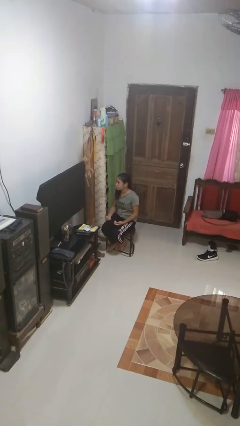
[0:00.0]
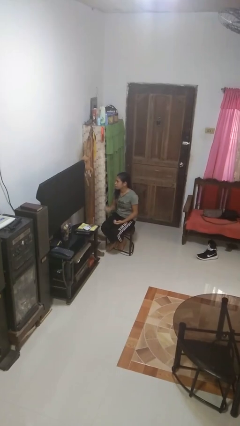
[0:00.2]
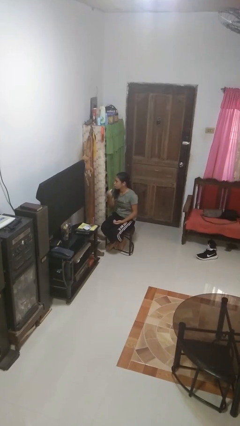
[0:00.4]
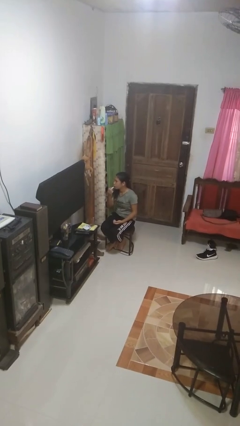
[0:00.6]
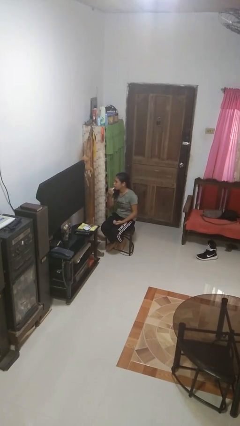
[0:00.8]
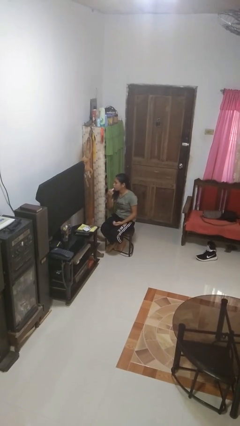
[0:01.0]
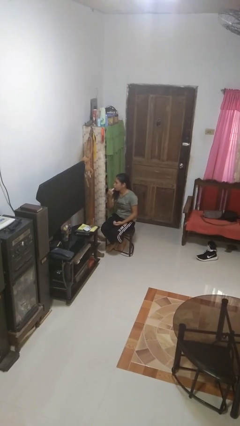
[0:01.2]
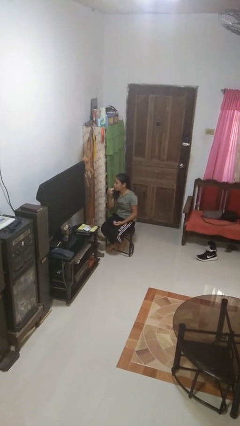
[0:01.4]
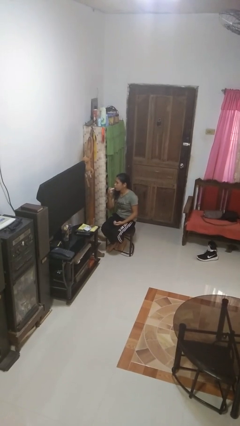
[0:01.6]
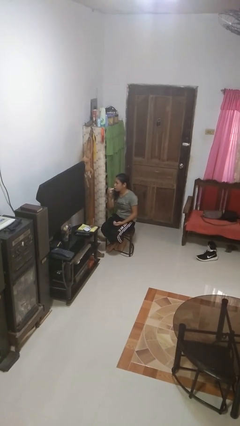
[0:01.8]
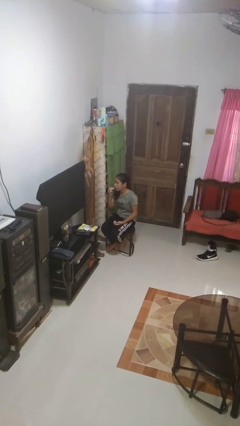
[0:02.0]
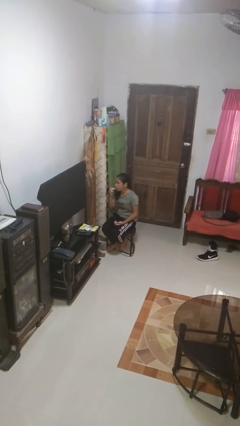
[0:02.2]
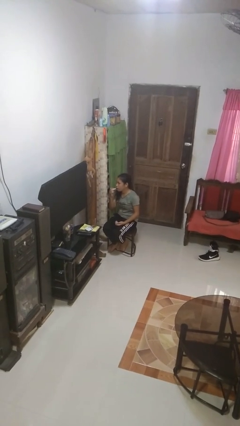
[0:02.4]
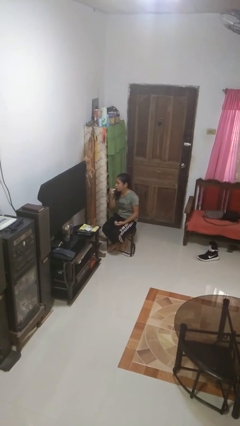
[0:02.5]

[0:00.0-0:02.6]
person applies lip makeup

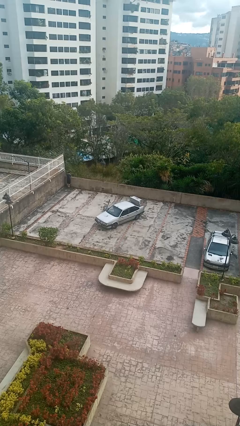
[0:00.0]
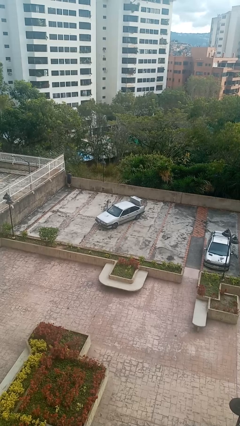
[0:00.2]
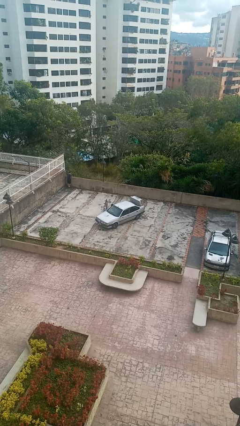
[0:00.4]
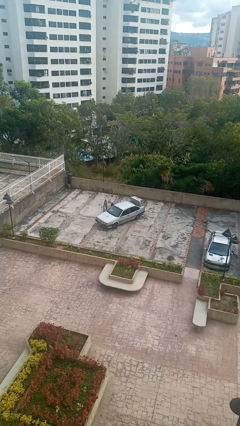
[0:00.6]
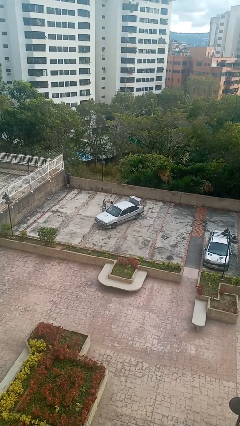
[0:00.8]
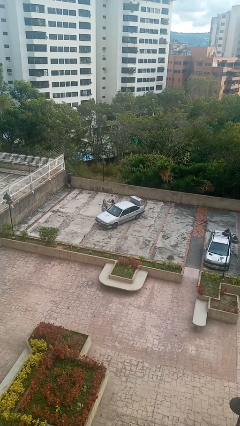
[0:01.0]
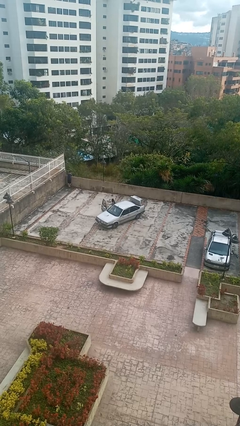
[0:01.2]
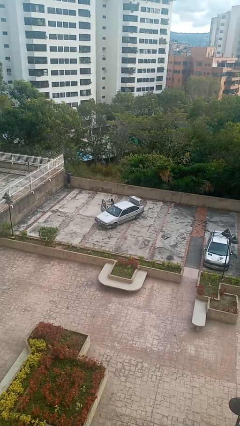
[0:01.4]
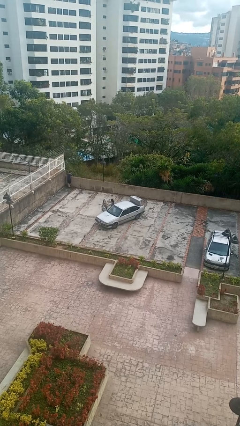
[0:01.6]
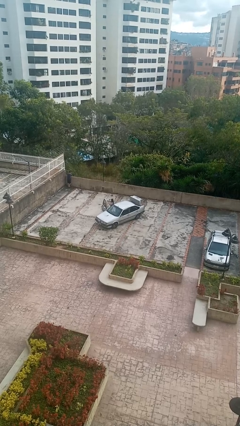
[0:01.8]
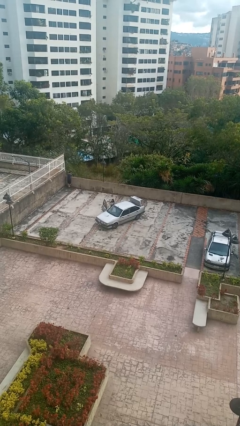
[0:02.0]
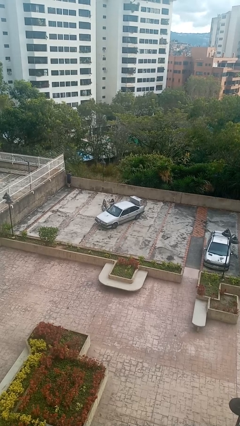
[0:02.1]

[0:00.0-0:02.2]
car drops off person

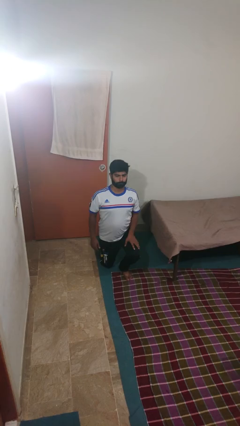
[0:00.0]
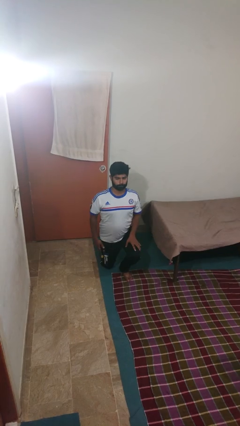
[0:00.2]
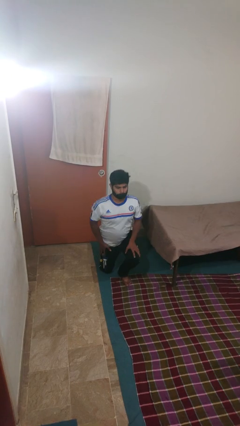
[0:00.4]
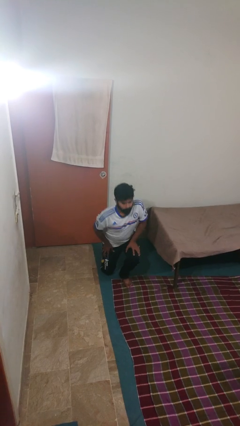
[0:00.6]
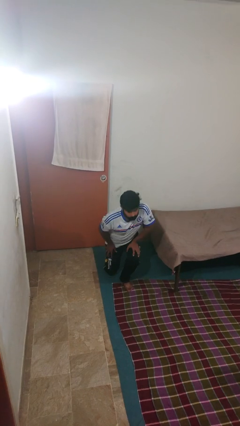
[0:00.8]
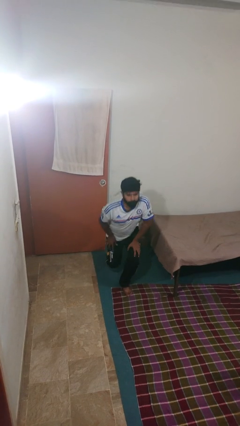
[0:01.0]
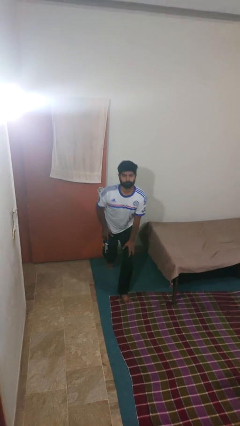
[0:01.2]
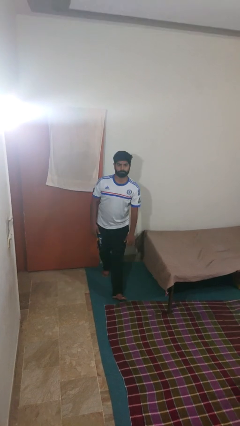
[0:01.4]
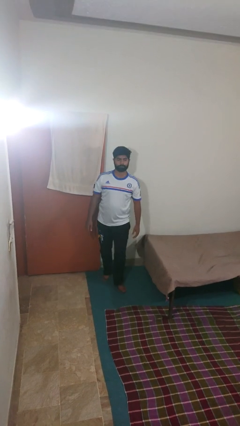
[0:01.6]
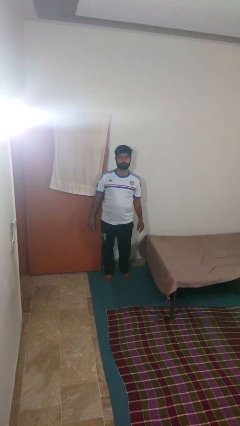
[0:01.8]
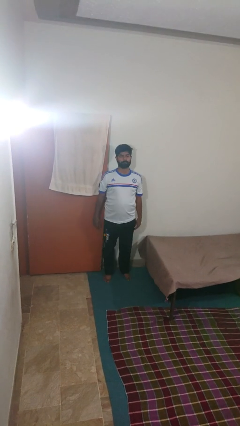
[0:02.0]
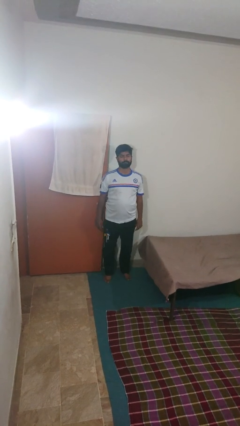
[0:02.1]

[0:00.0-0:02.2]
person stands up from floor

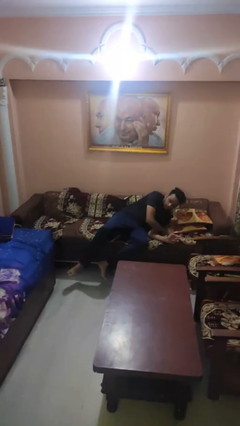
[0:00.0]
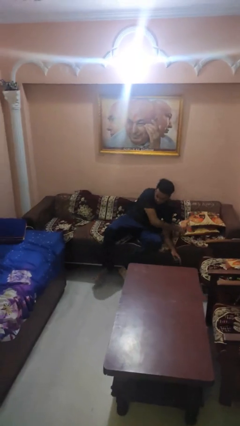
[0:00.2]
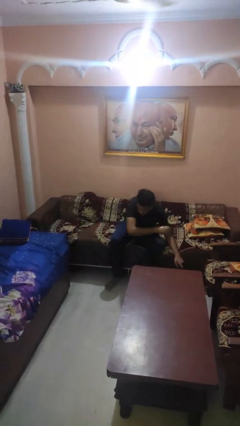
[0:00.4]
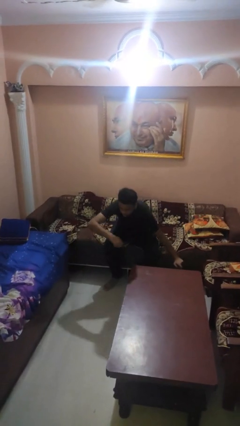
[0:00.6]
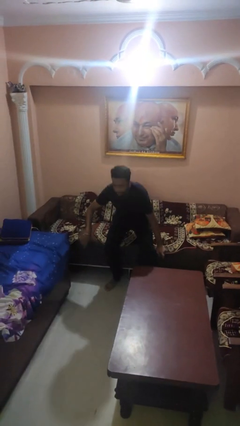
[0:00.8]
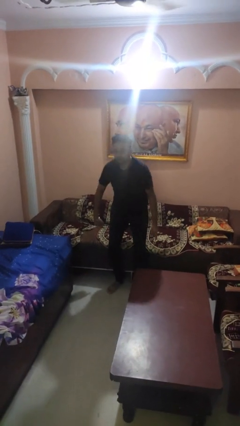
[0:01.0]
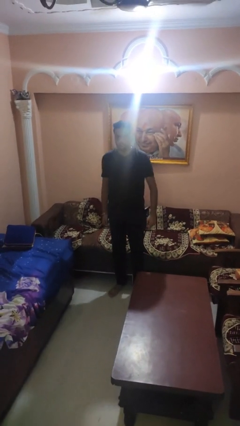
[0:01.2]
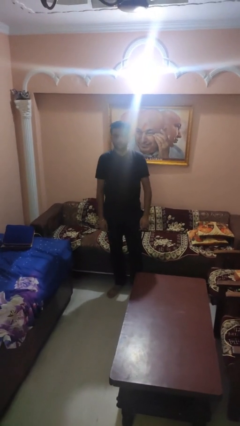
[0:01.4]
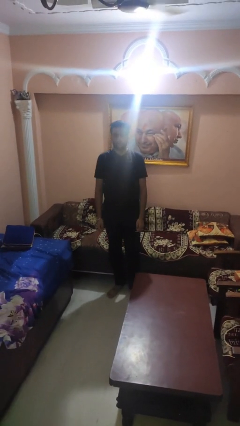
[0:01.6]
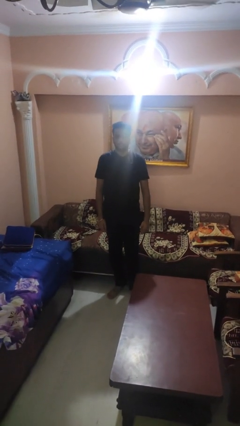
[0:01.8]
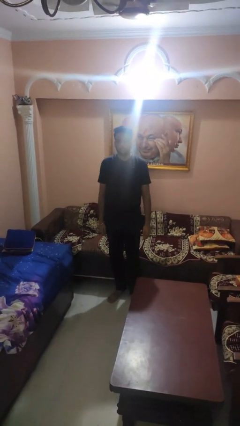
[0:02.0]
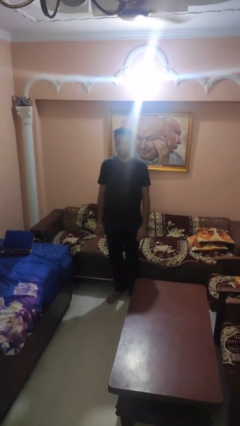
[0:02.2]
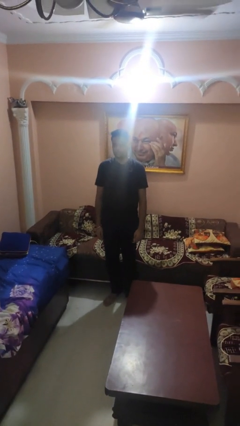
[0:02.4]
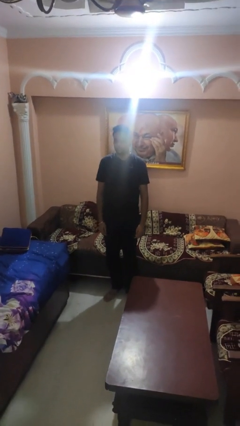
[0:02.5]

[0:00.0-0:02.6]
person stands up

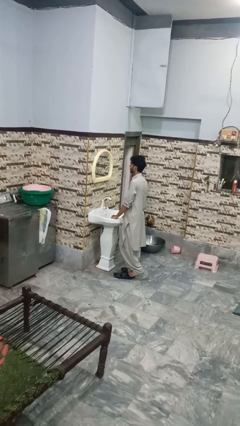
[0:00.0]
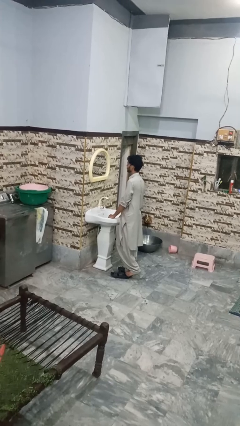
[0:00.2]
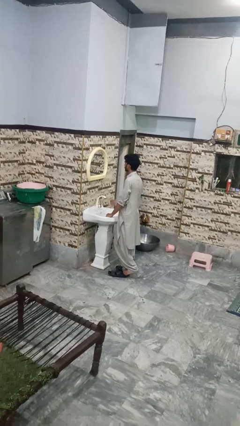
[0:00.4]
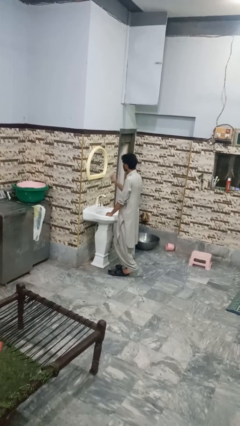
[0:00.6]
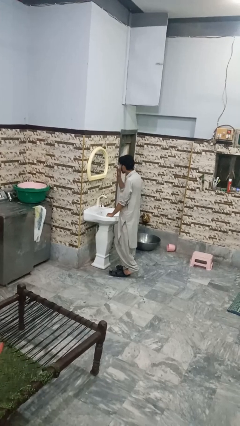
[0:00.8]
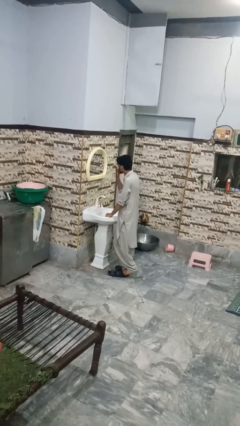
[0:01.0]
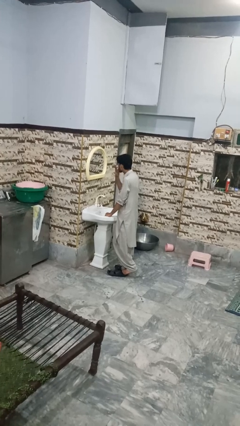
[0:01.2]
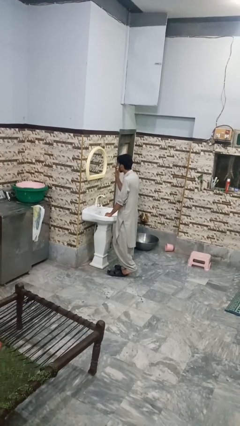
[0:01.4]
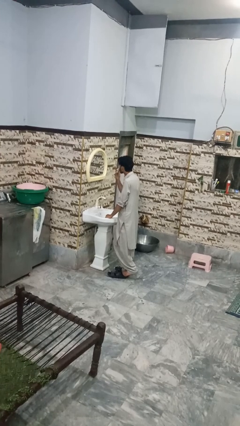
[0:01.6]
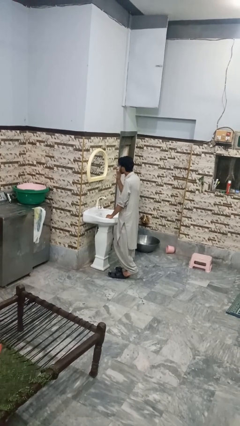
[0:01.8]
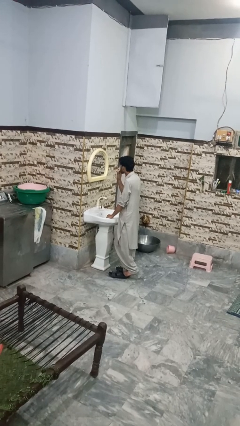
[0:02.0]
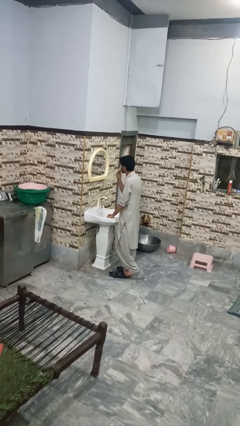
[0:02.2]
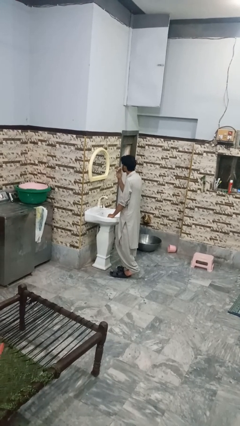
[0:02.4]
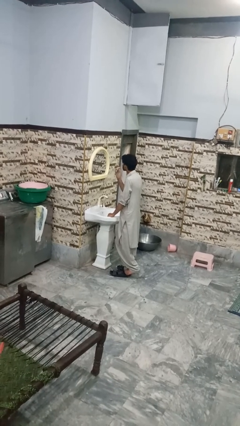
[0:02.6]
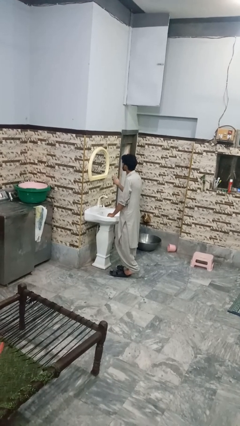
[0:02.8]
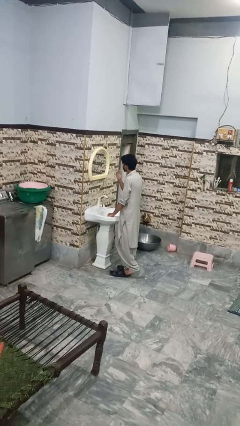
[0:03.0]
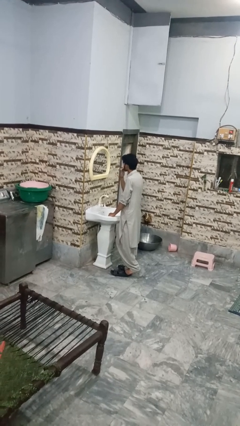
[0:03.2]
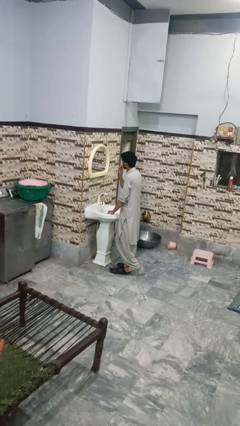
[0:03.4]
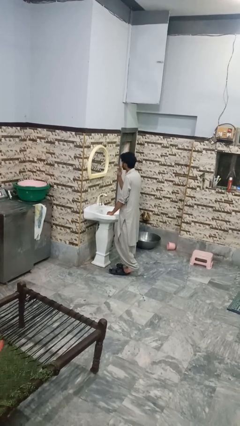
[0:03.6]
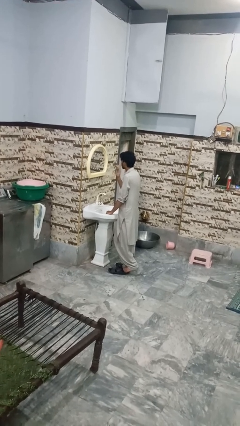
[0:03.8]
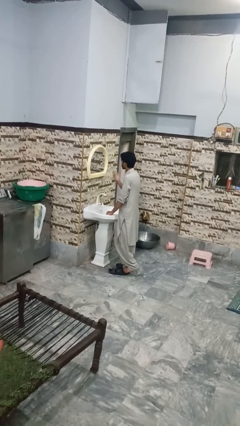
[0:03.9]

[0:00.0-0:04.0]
person applies shaving cream

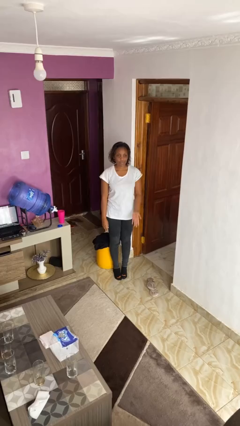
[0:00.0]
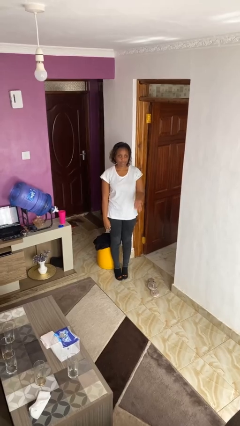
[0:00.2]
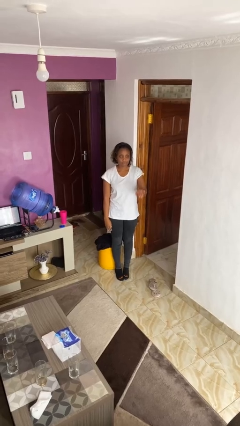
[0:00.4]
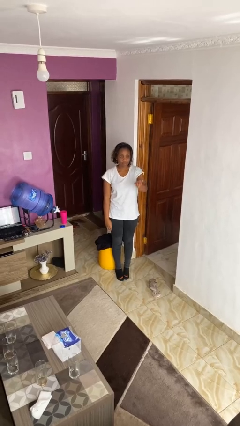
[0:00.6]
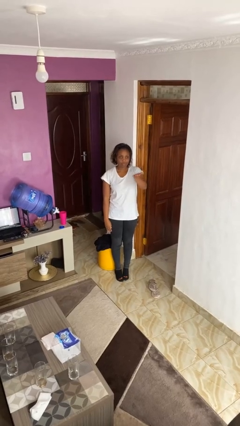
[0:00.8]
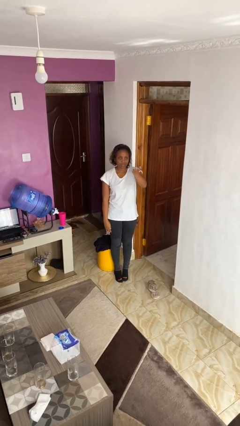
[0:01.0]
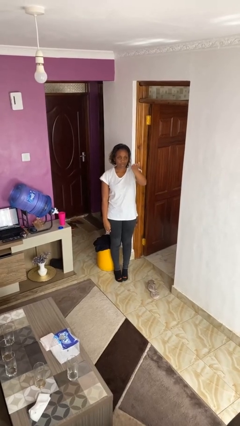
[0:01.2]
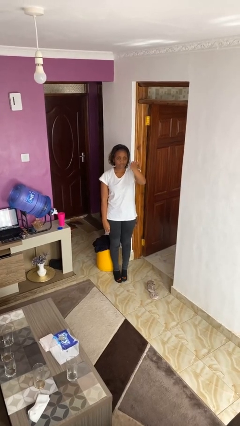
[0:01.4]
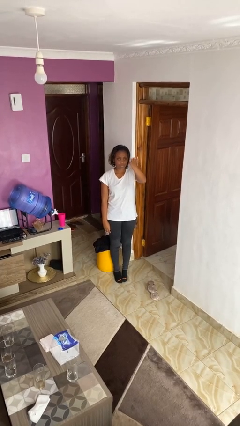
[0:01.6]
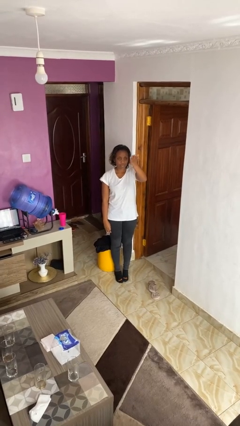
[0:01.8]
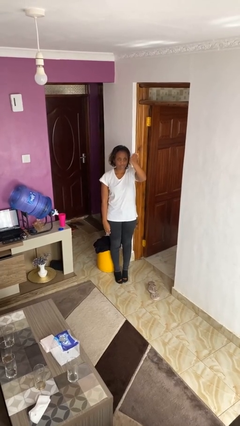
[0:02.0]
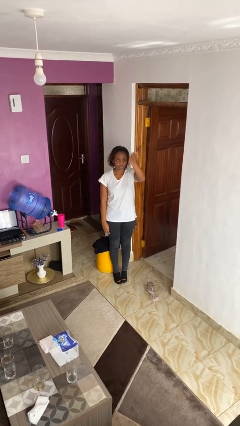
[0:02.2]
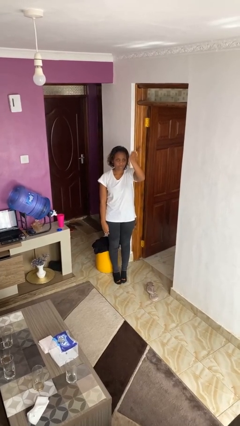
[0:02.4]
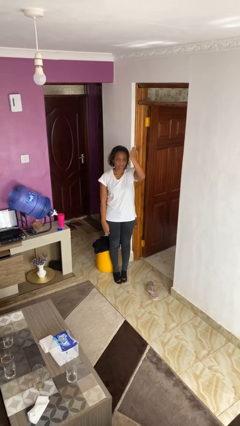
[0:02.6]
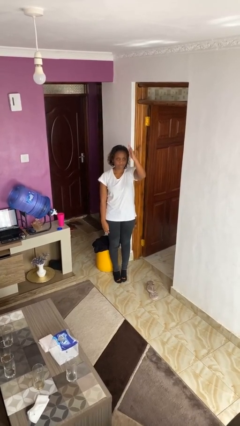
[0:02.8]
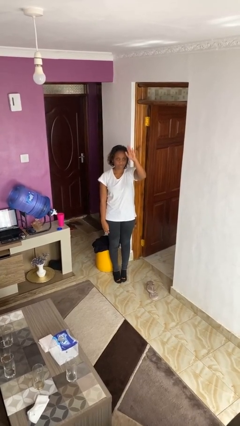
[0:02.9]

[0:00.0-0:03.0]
person gestures swipe up

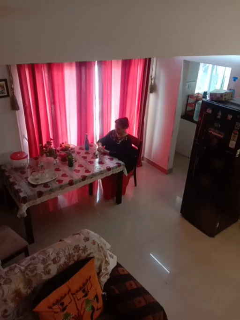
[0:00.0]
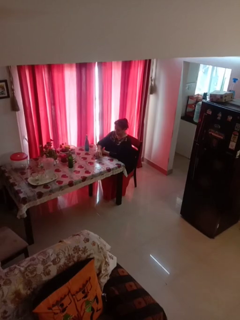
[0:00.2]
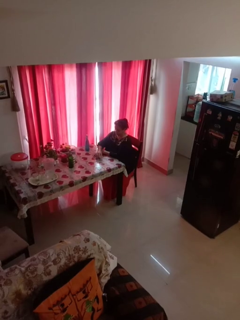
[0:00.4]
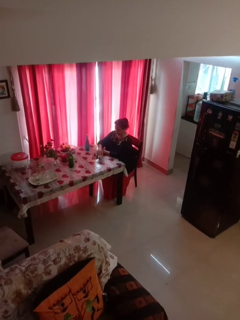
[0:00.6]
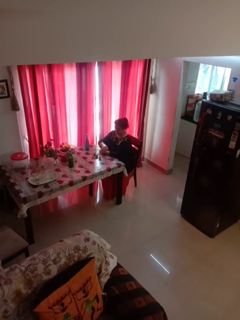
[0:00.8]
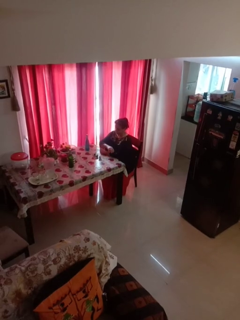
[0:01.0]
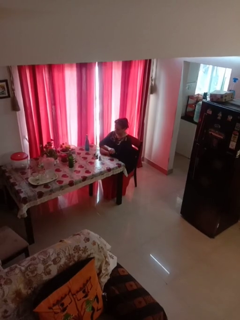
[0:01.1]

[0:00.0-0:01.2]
person puts down object on table
